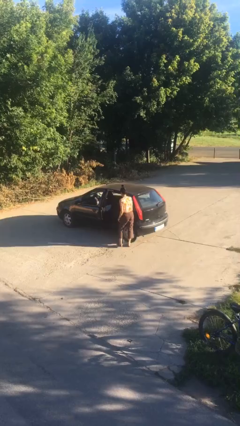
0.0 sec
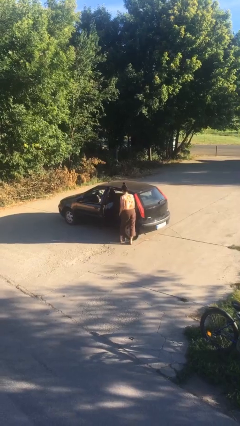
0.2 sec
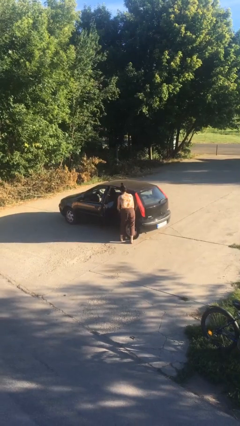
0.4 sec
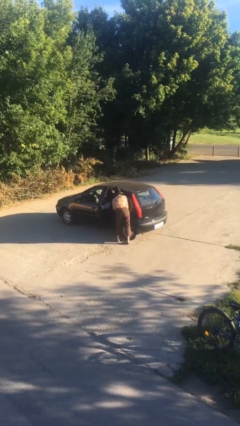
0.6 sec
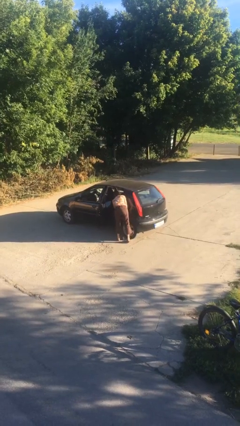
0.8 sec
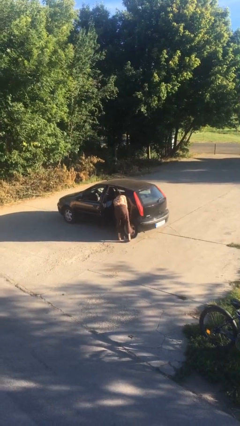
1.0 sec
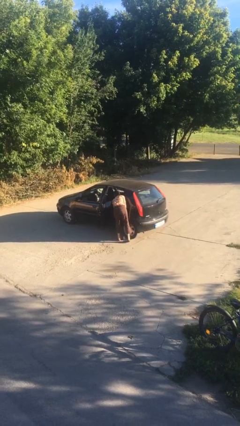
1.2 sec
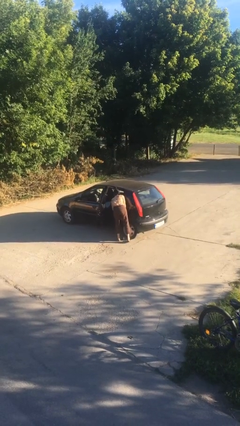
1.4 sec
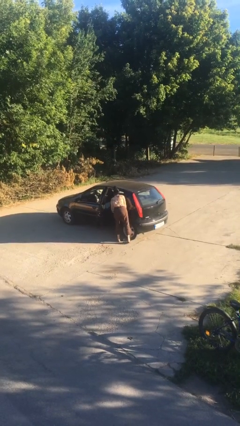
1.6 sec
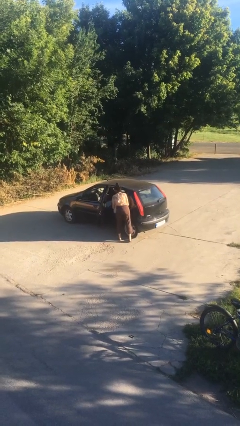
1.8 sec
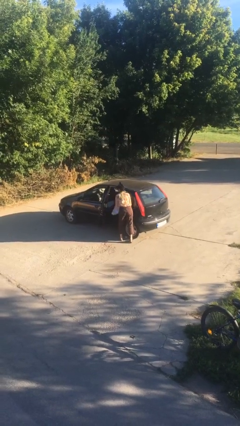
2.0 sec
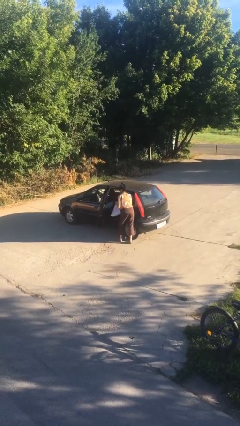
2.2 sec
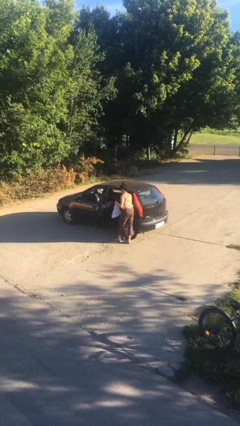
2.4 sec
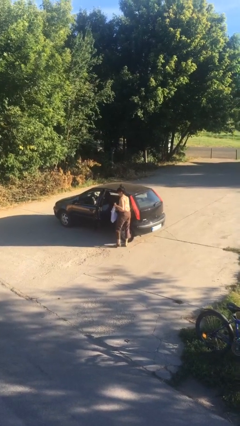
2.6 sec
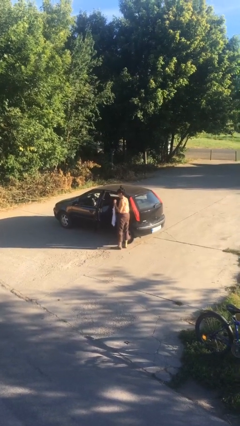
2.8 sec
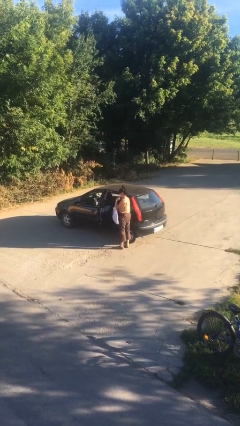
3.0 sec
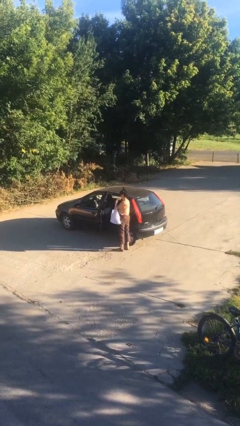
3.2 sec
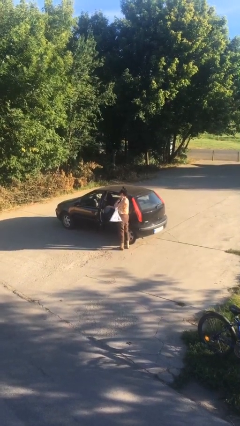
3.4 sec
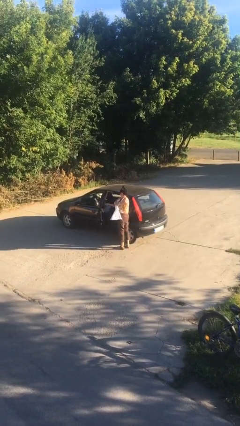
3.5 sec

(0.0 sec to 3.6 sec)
person unloads car

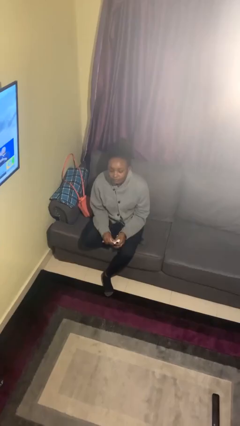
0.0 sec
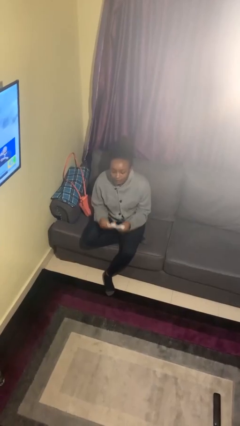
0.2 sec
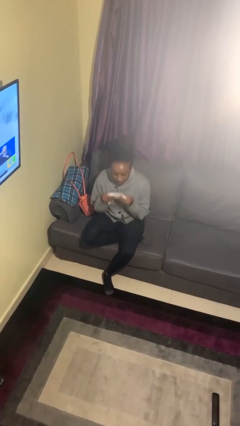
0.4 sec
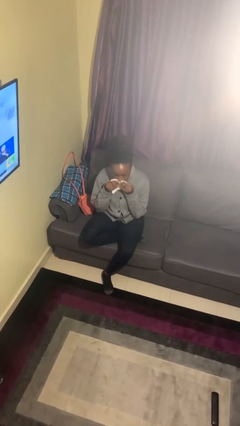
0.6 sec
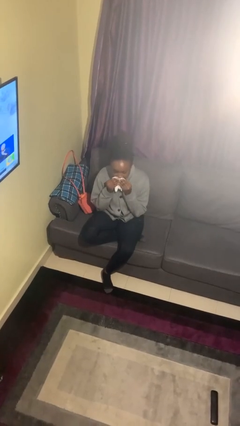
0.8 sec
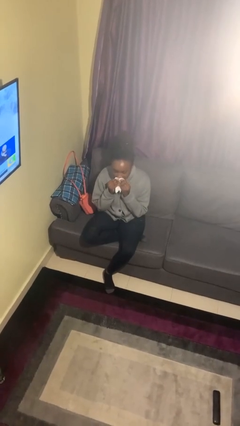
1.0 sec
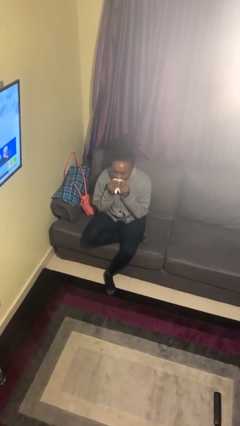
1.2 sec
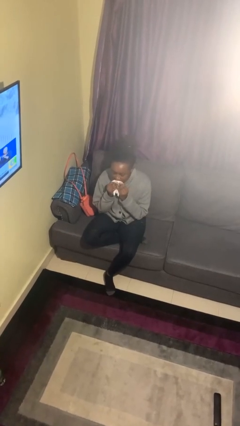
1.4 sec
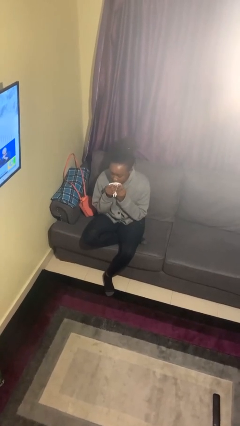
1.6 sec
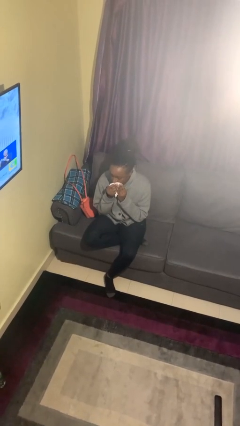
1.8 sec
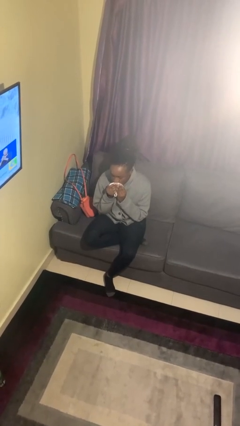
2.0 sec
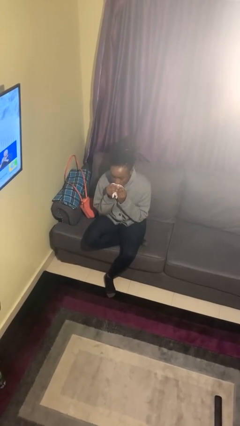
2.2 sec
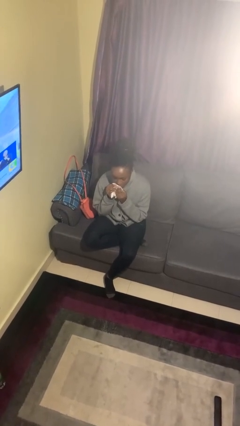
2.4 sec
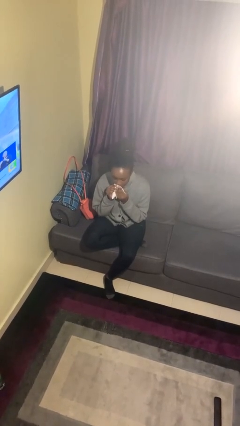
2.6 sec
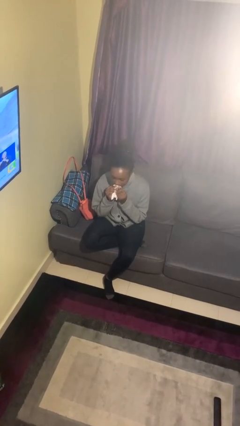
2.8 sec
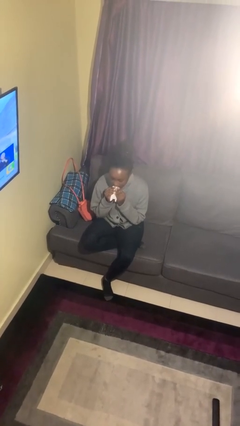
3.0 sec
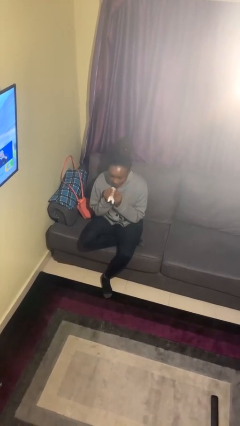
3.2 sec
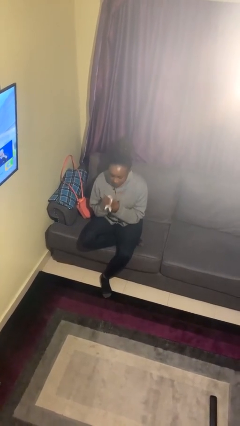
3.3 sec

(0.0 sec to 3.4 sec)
person wipes mouth with napkin

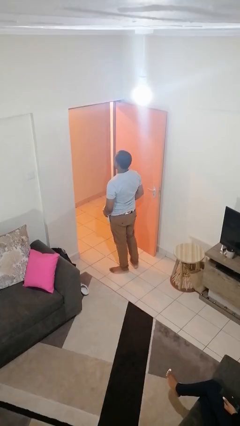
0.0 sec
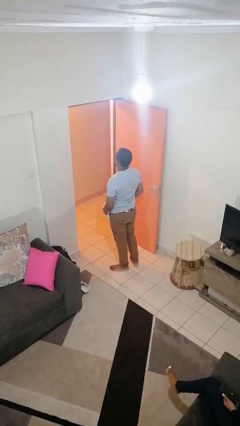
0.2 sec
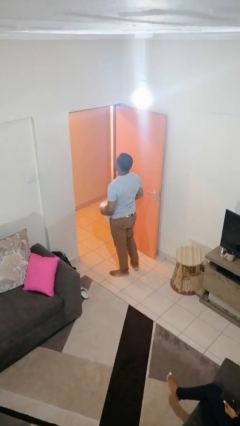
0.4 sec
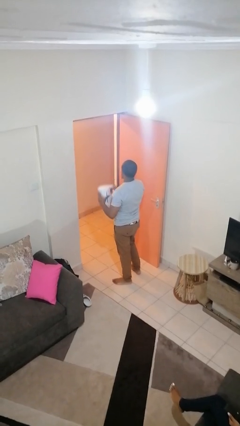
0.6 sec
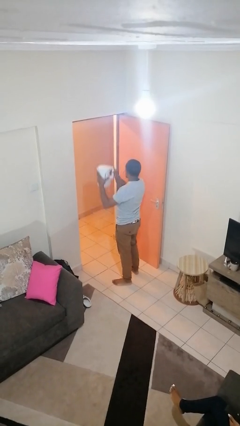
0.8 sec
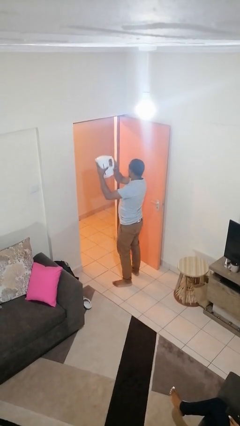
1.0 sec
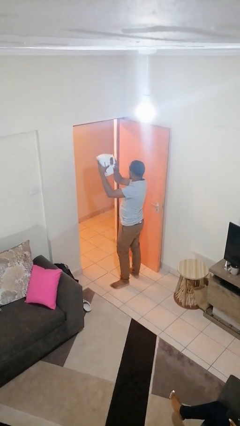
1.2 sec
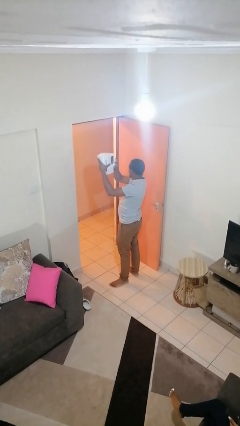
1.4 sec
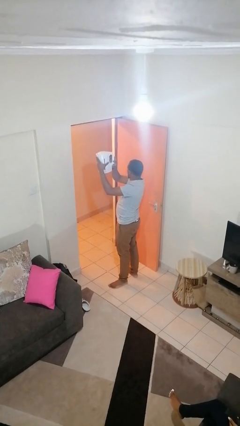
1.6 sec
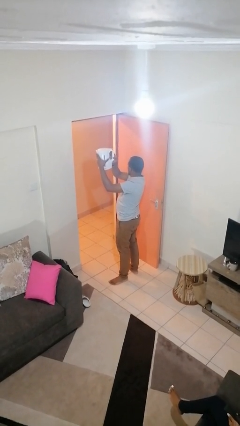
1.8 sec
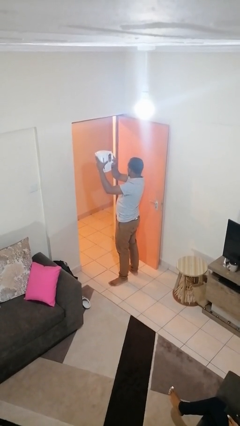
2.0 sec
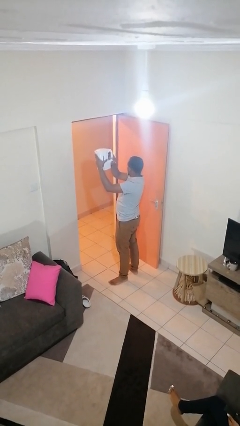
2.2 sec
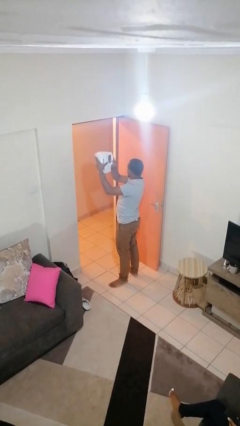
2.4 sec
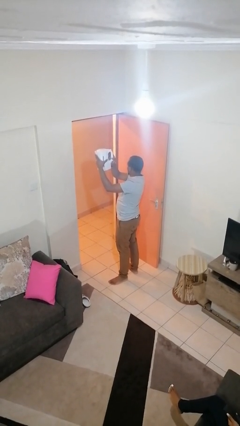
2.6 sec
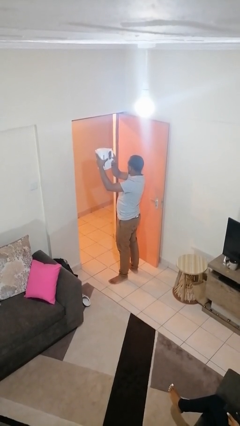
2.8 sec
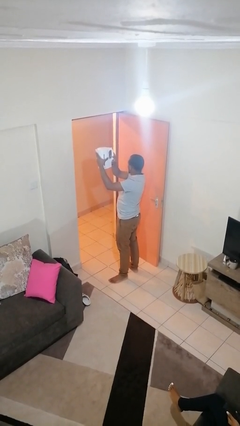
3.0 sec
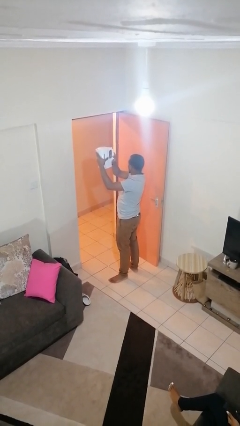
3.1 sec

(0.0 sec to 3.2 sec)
person holds object above head

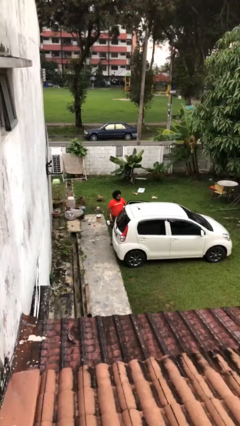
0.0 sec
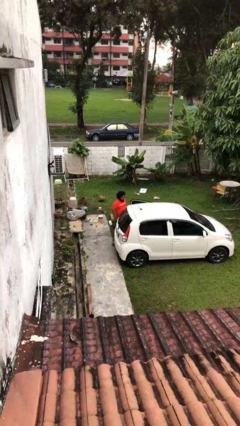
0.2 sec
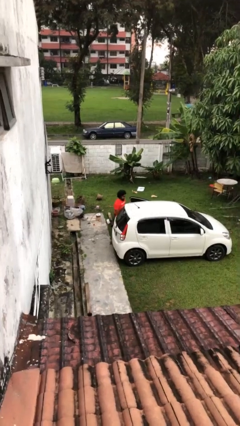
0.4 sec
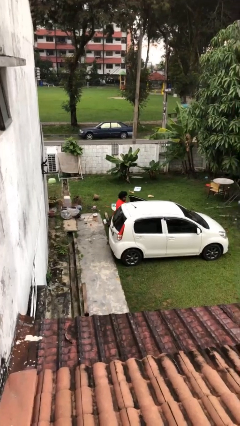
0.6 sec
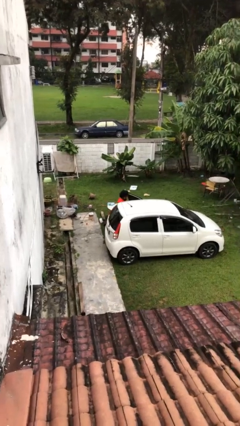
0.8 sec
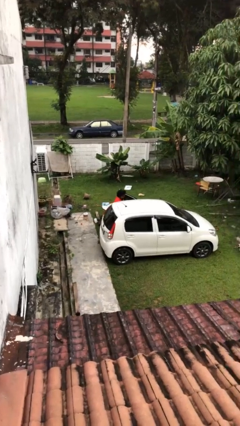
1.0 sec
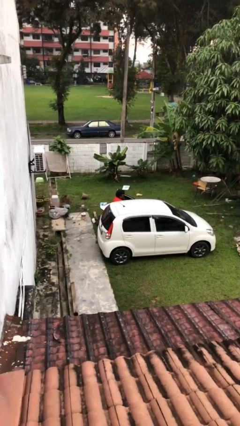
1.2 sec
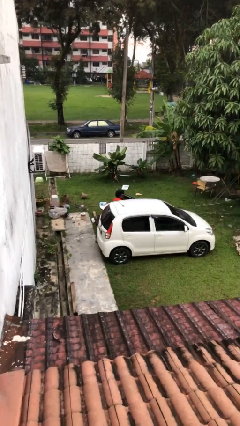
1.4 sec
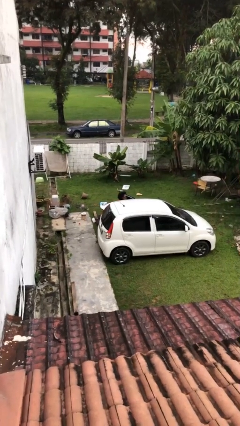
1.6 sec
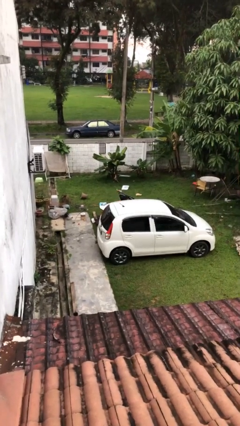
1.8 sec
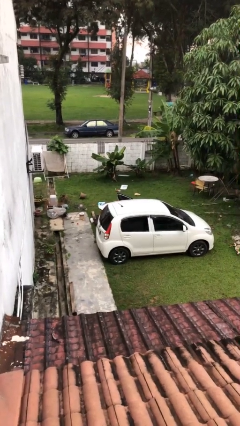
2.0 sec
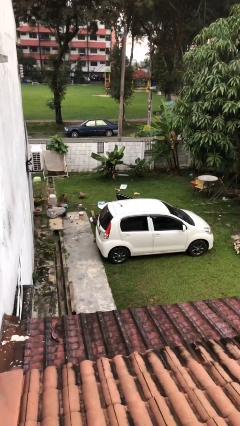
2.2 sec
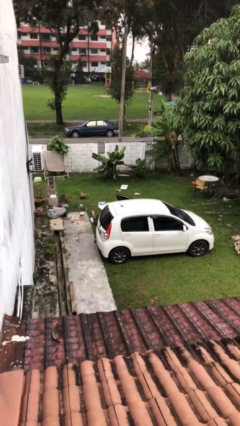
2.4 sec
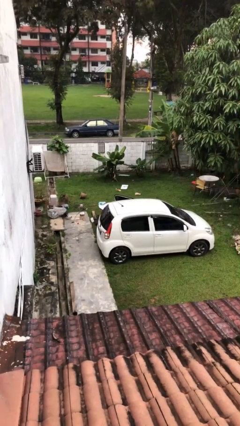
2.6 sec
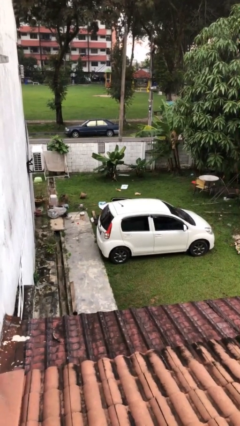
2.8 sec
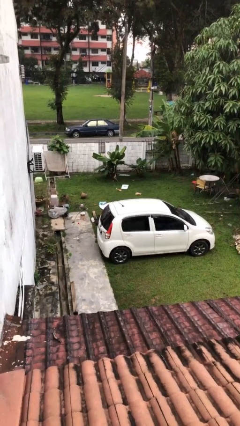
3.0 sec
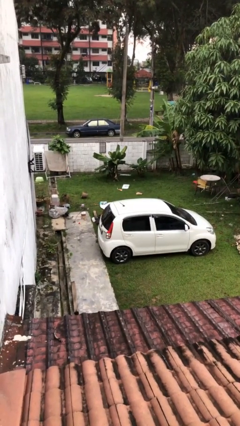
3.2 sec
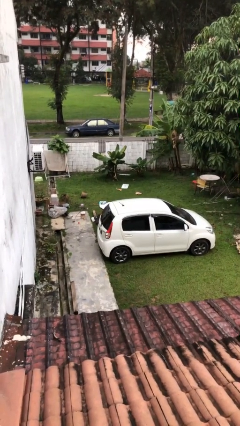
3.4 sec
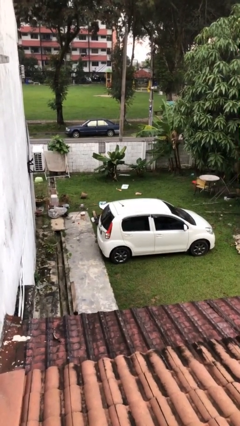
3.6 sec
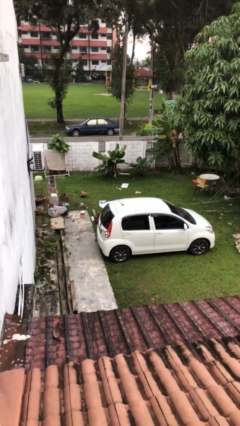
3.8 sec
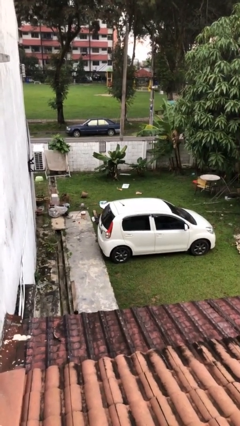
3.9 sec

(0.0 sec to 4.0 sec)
car picks up person

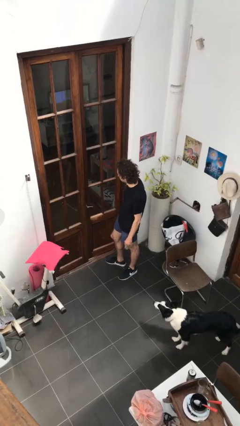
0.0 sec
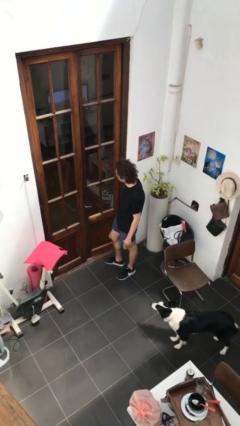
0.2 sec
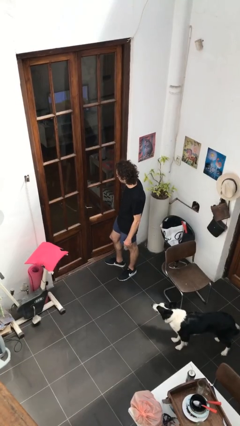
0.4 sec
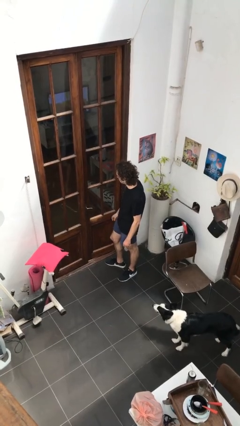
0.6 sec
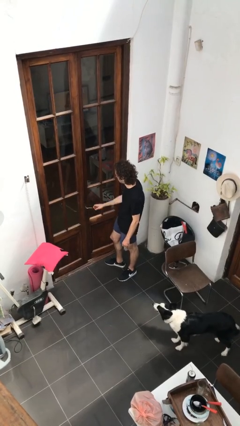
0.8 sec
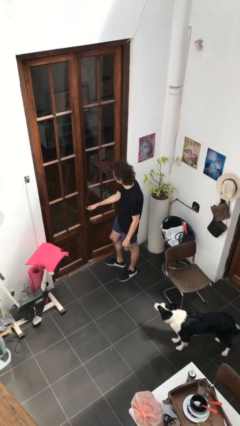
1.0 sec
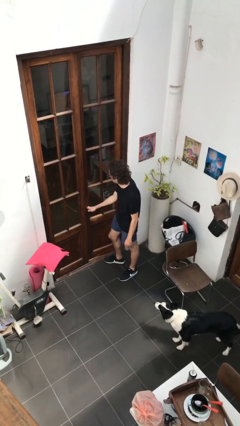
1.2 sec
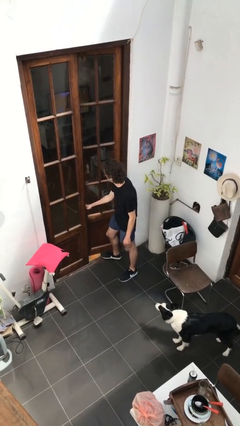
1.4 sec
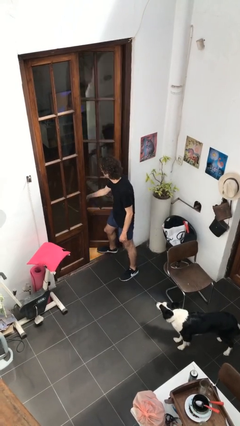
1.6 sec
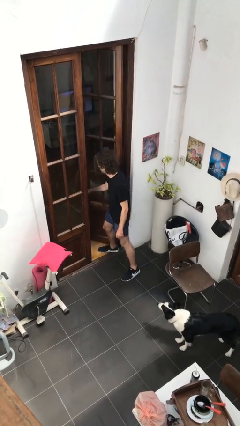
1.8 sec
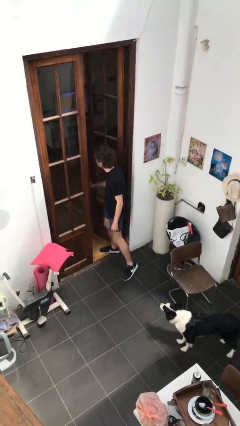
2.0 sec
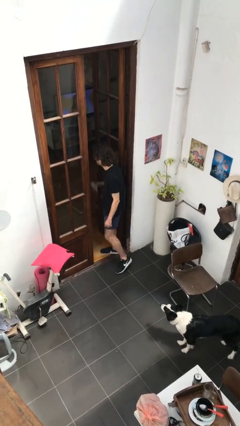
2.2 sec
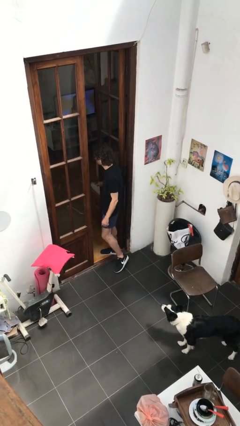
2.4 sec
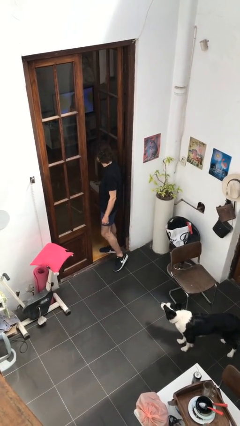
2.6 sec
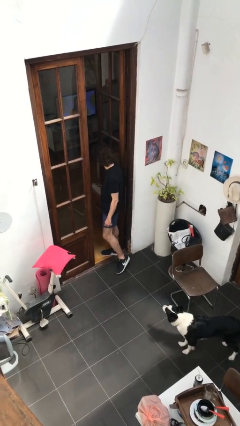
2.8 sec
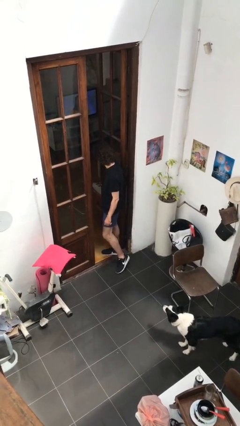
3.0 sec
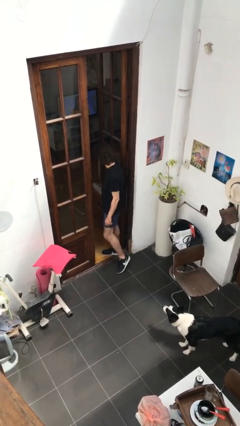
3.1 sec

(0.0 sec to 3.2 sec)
person opens facility door
